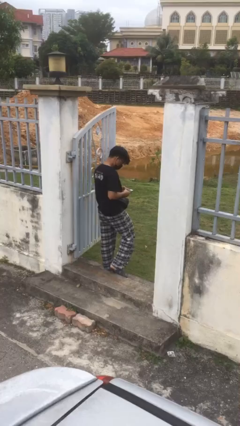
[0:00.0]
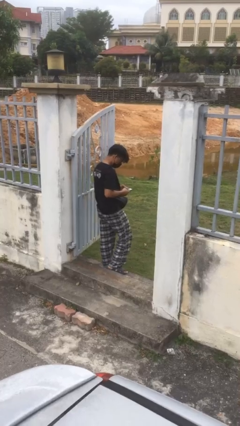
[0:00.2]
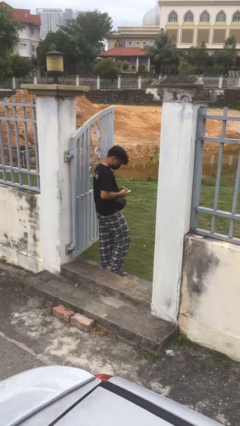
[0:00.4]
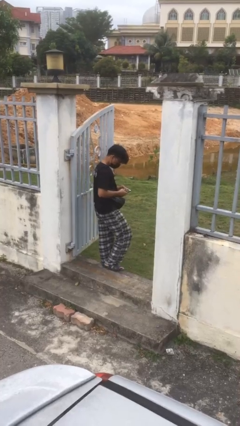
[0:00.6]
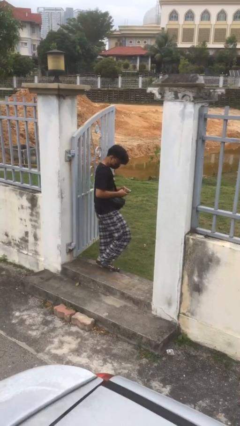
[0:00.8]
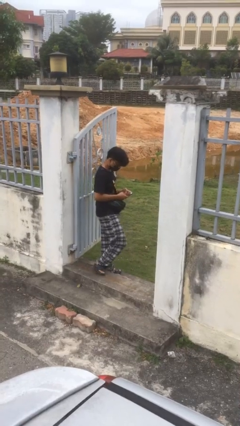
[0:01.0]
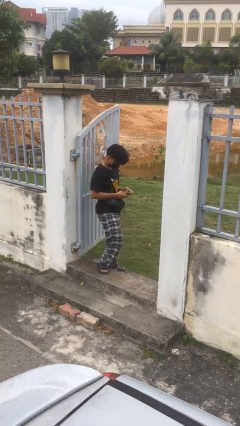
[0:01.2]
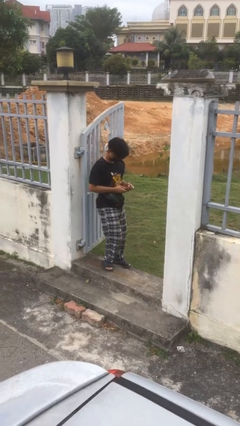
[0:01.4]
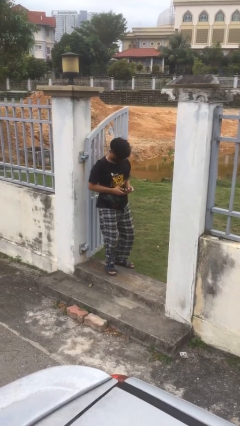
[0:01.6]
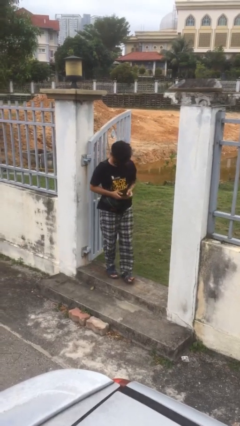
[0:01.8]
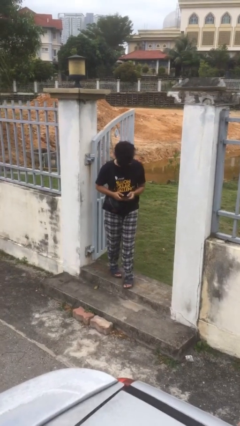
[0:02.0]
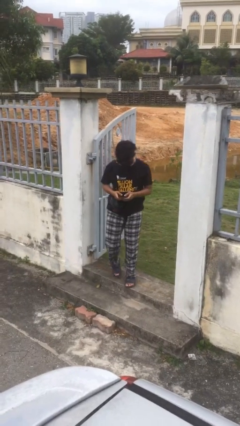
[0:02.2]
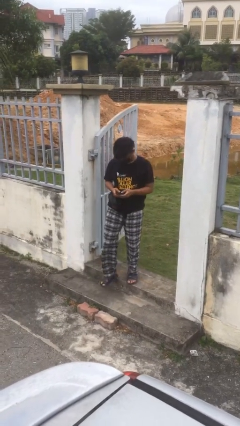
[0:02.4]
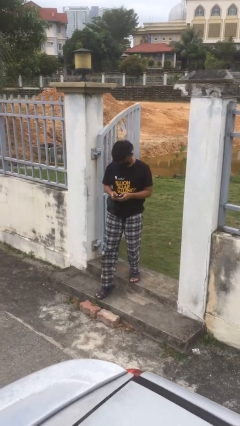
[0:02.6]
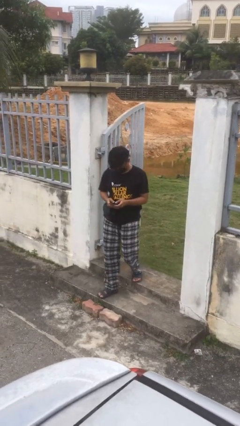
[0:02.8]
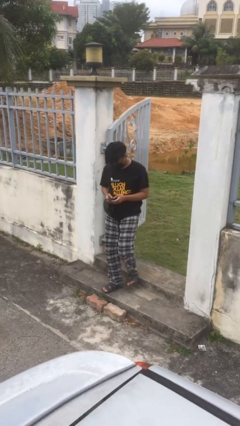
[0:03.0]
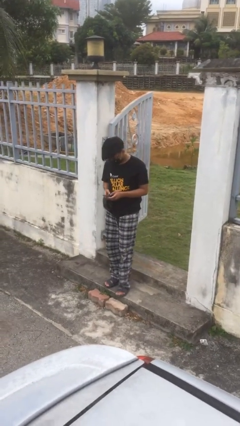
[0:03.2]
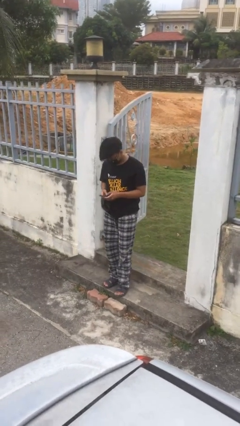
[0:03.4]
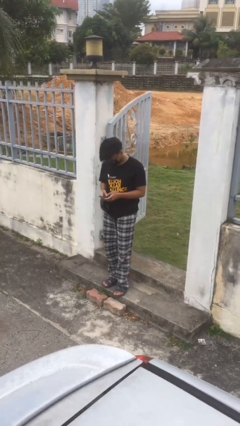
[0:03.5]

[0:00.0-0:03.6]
person enters scene through structure

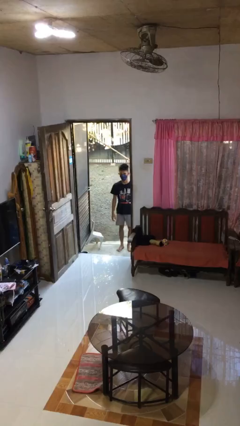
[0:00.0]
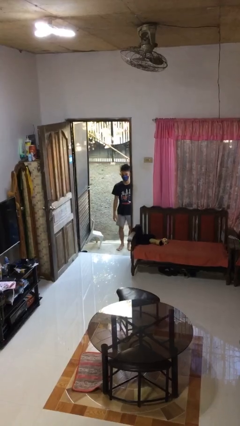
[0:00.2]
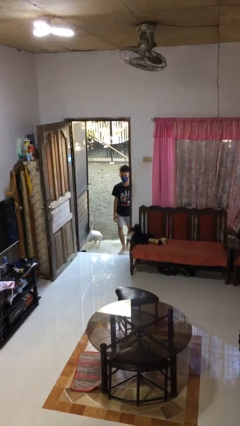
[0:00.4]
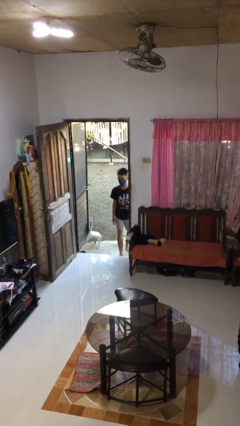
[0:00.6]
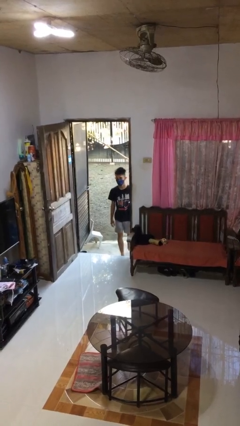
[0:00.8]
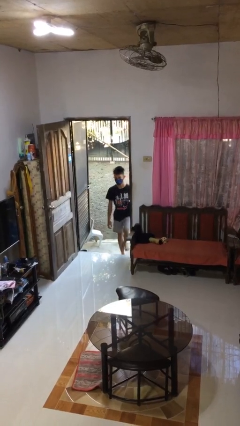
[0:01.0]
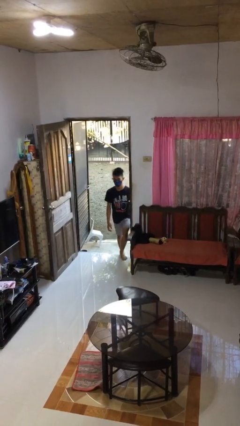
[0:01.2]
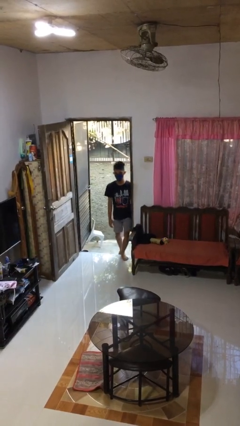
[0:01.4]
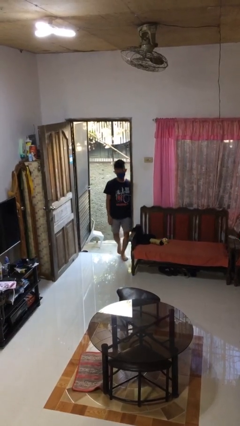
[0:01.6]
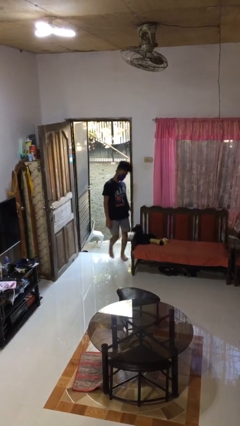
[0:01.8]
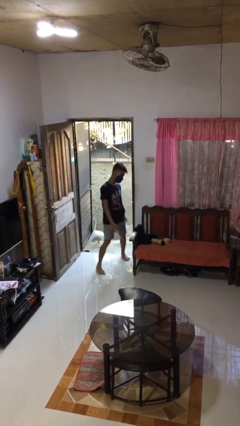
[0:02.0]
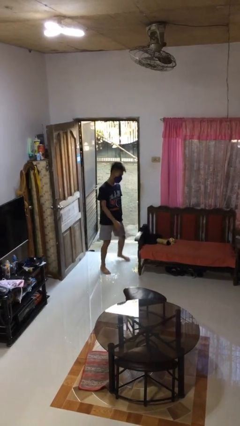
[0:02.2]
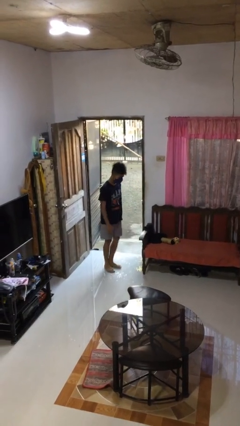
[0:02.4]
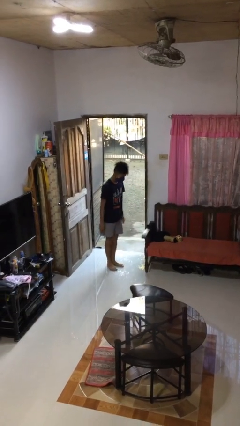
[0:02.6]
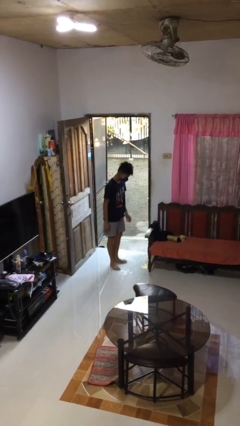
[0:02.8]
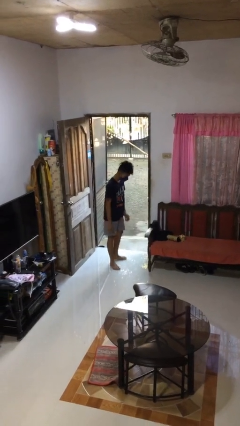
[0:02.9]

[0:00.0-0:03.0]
person bumps into wall

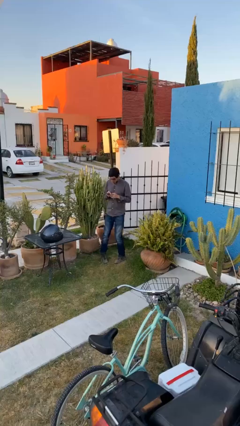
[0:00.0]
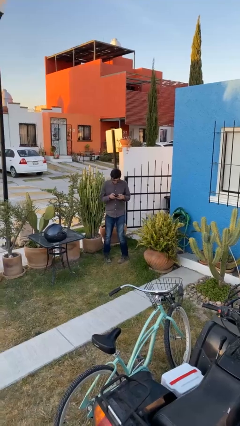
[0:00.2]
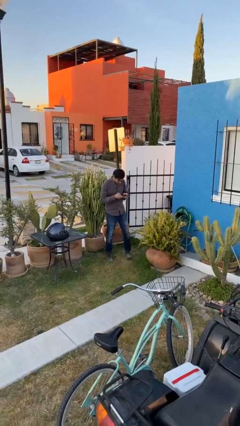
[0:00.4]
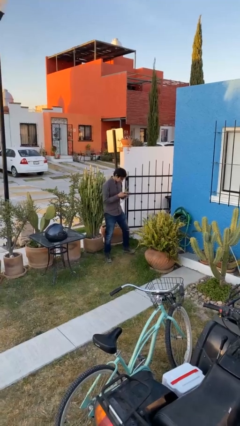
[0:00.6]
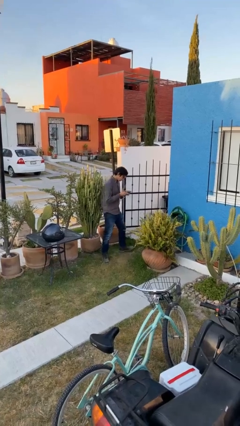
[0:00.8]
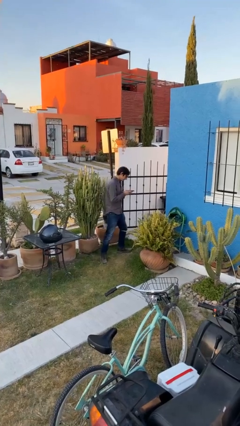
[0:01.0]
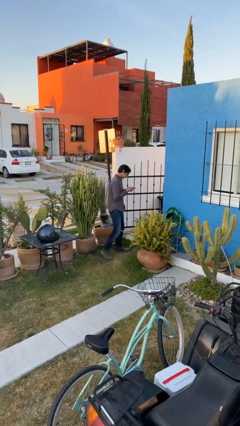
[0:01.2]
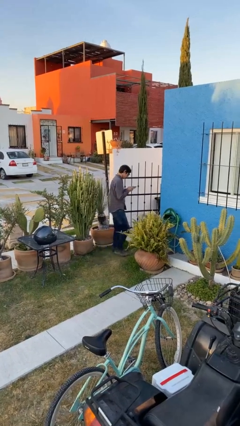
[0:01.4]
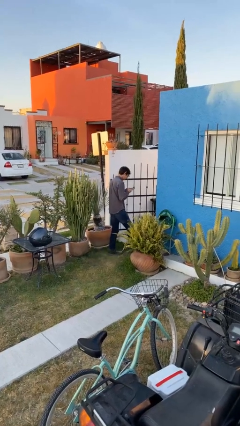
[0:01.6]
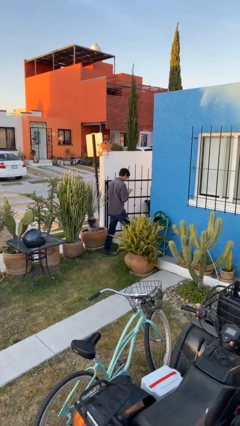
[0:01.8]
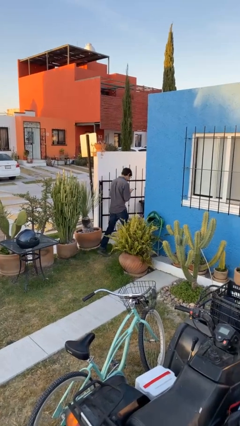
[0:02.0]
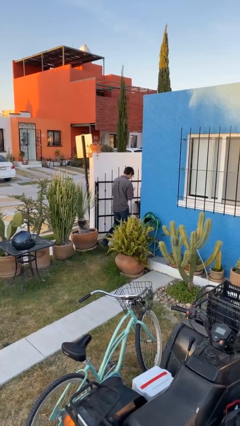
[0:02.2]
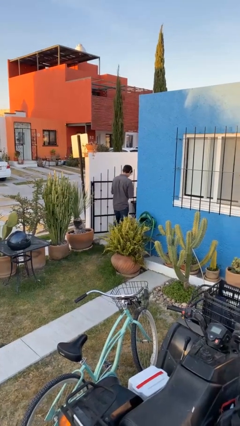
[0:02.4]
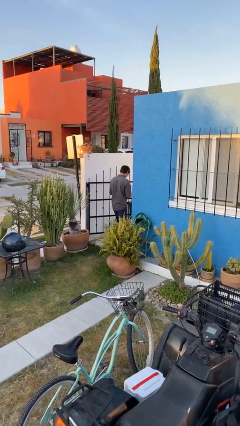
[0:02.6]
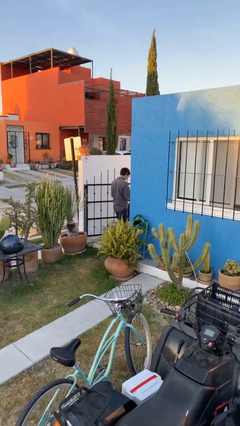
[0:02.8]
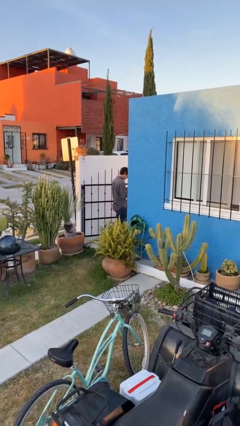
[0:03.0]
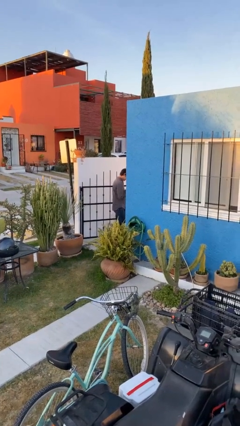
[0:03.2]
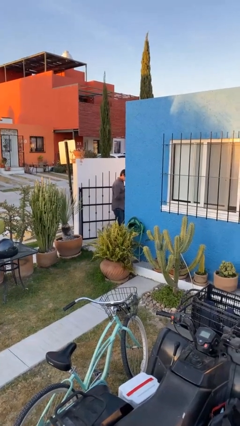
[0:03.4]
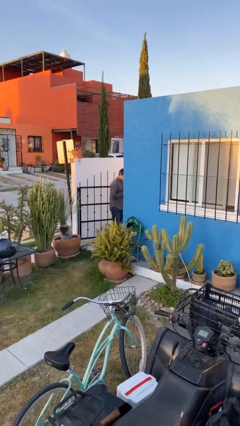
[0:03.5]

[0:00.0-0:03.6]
person exits scene through structure

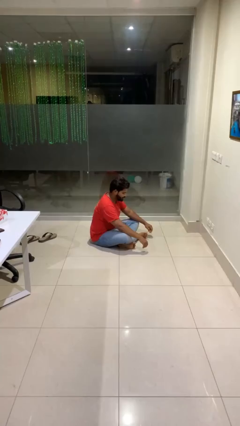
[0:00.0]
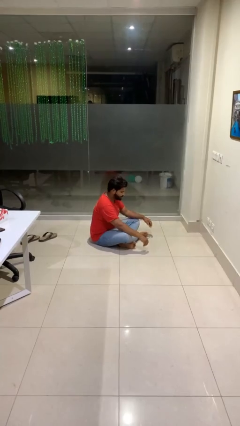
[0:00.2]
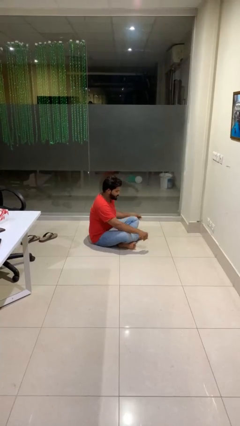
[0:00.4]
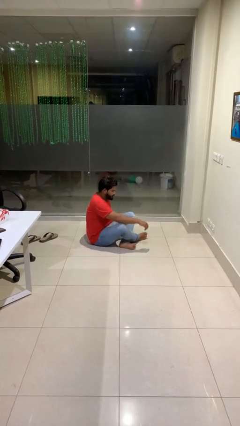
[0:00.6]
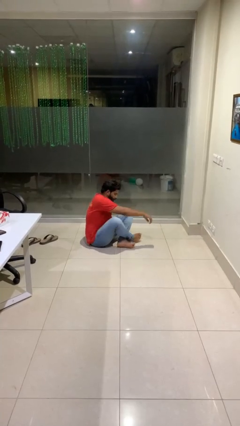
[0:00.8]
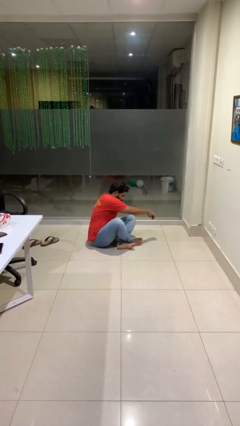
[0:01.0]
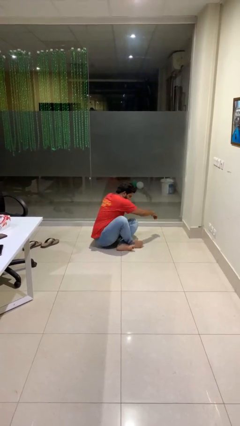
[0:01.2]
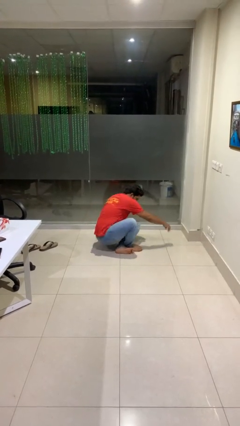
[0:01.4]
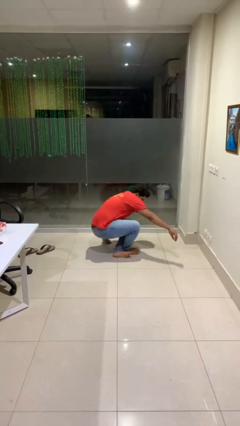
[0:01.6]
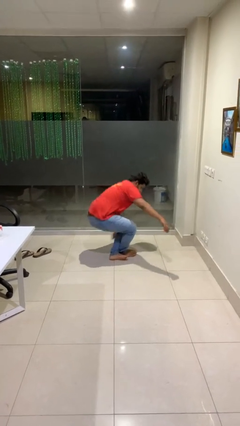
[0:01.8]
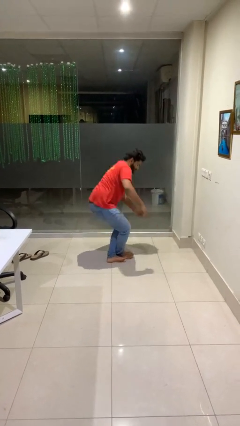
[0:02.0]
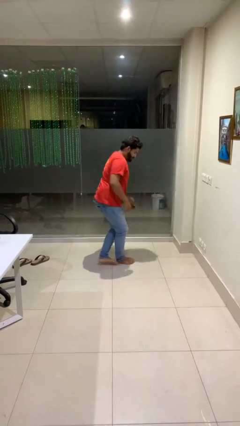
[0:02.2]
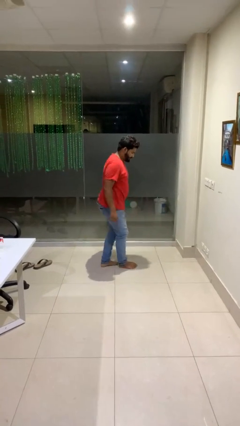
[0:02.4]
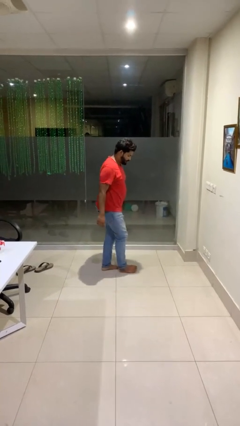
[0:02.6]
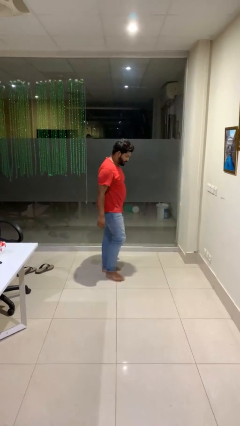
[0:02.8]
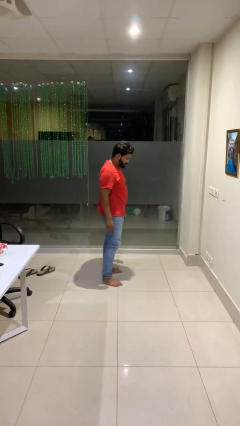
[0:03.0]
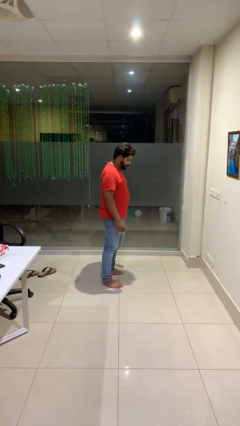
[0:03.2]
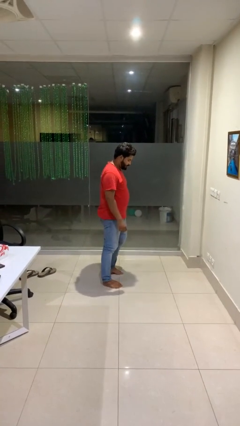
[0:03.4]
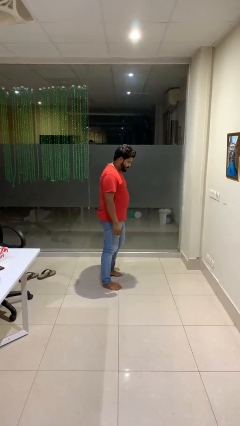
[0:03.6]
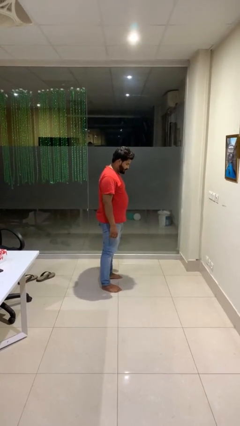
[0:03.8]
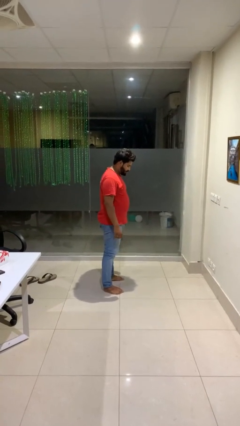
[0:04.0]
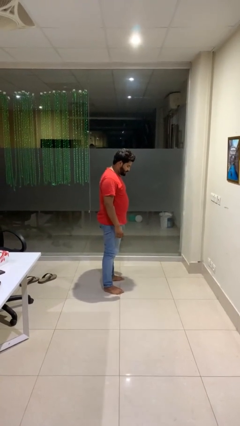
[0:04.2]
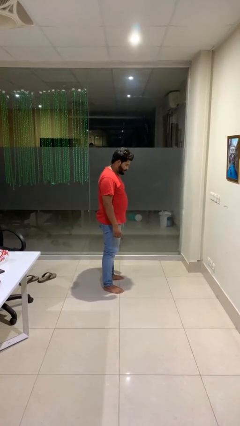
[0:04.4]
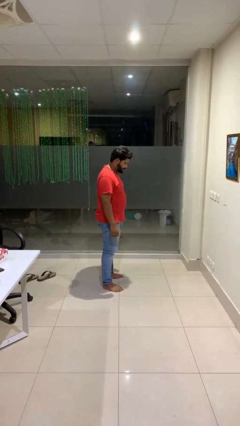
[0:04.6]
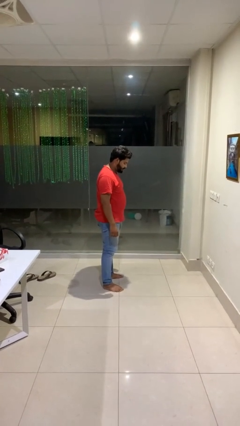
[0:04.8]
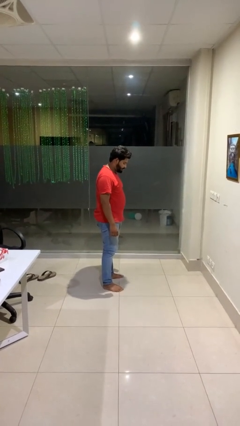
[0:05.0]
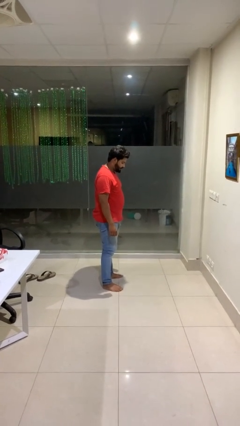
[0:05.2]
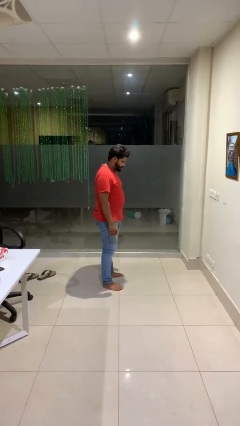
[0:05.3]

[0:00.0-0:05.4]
person stands up from floor

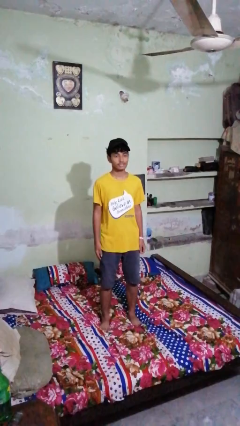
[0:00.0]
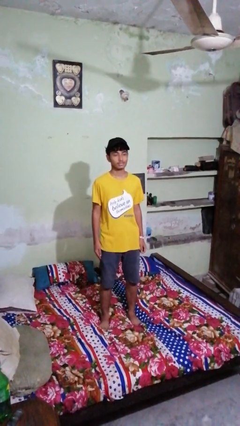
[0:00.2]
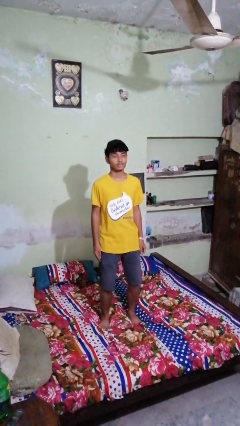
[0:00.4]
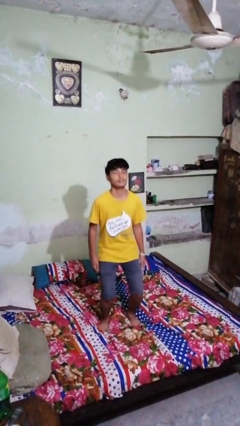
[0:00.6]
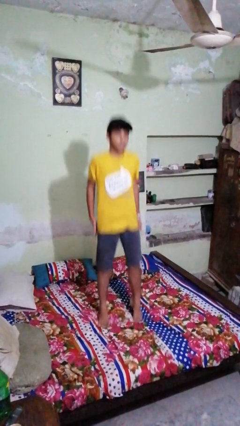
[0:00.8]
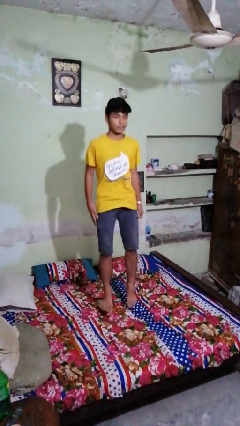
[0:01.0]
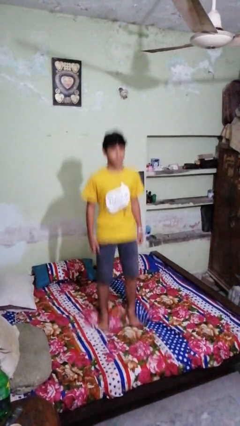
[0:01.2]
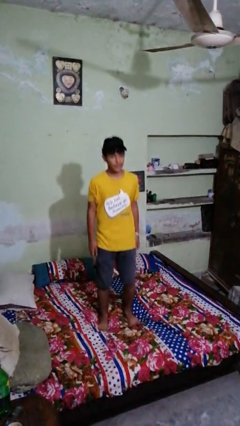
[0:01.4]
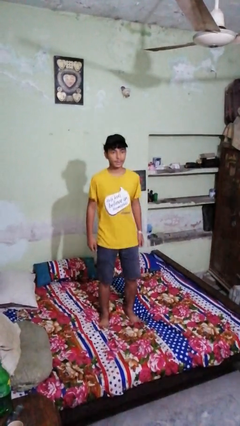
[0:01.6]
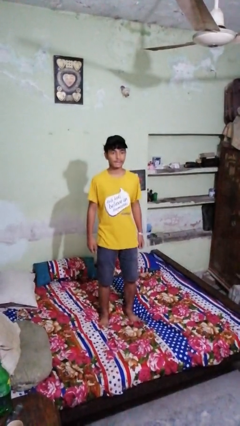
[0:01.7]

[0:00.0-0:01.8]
person jumps on bed

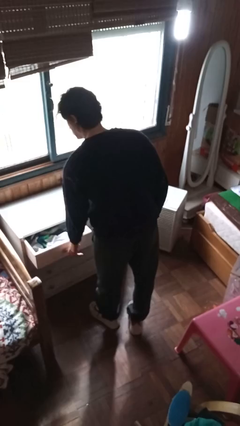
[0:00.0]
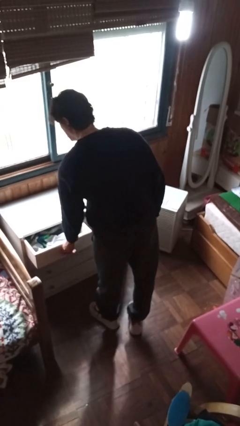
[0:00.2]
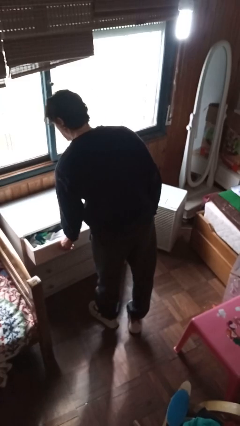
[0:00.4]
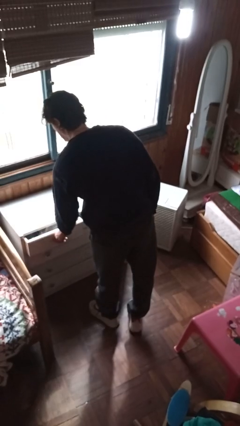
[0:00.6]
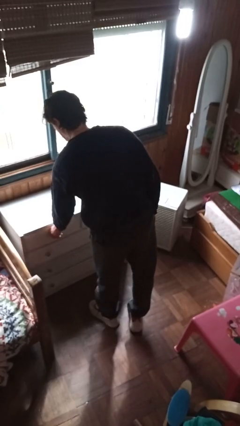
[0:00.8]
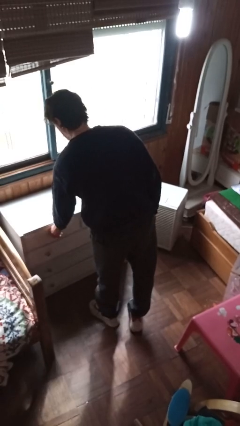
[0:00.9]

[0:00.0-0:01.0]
person closes dresser drawer
